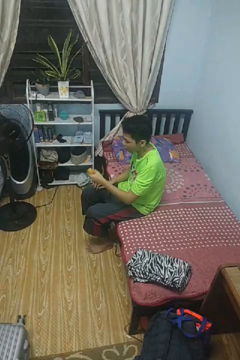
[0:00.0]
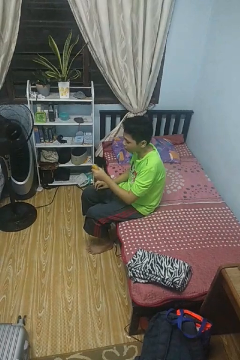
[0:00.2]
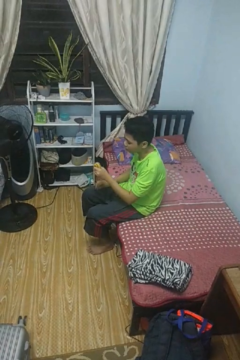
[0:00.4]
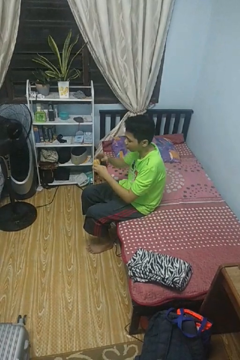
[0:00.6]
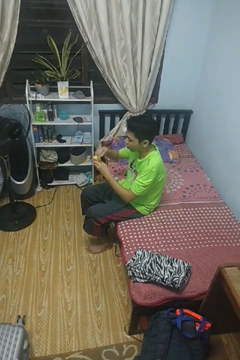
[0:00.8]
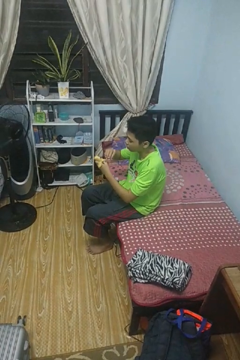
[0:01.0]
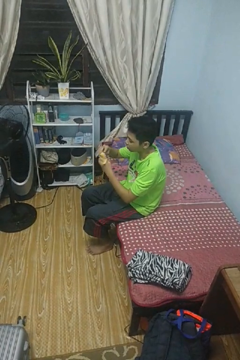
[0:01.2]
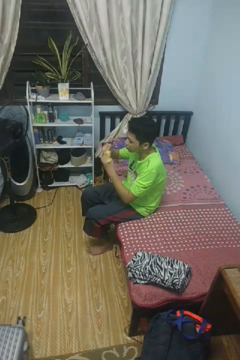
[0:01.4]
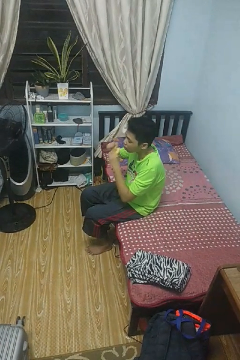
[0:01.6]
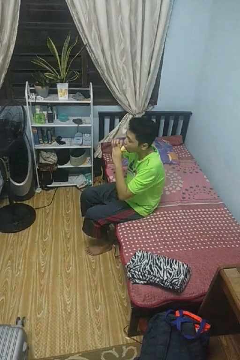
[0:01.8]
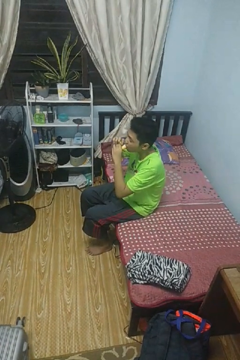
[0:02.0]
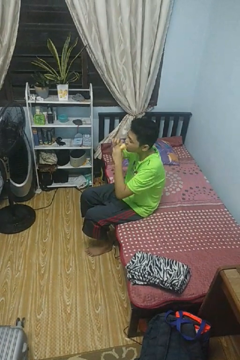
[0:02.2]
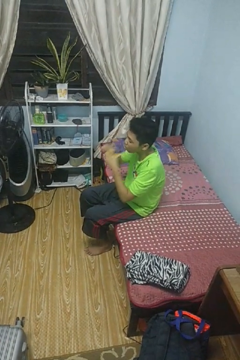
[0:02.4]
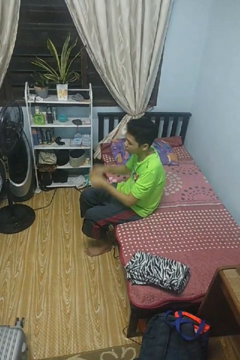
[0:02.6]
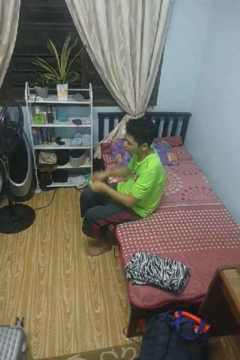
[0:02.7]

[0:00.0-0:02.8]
person eats banana

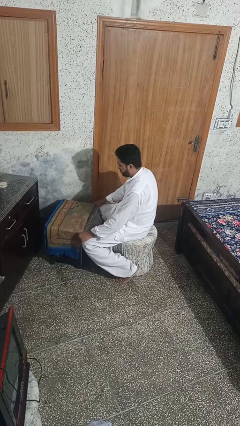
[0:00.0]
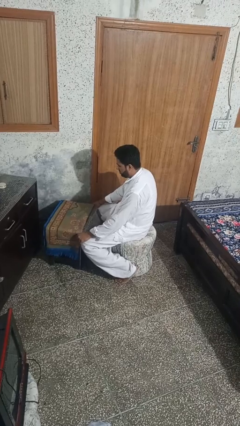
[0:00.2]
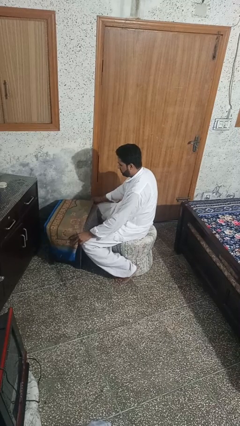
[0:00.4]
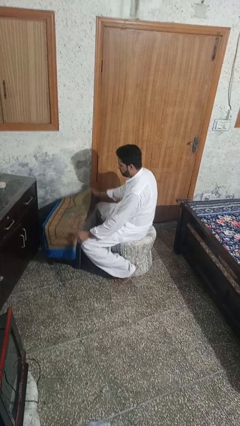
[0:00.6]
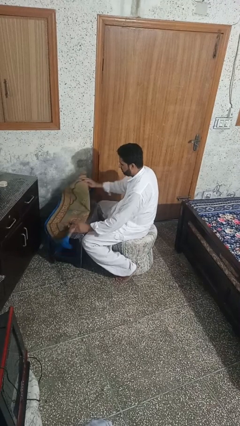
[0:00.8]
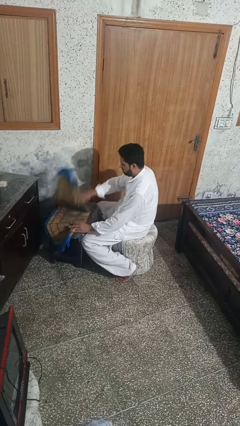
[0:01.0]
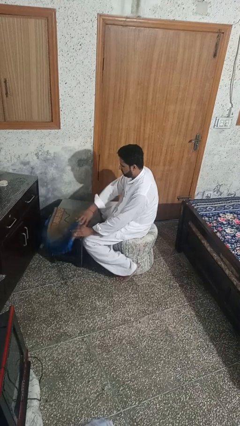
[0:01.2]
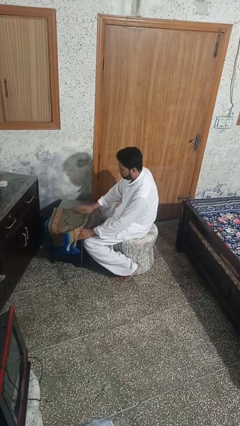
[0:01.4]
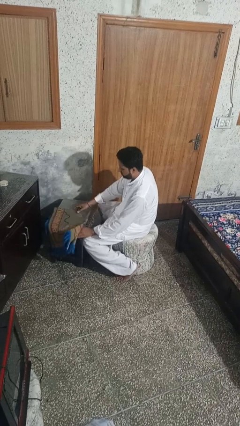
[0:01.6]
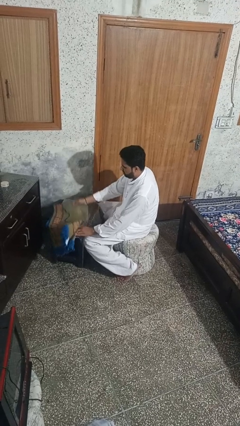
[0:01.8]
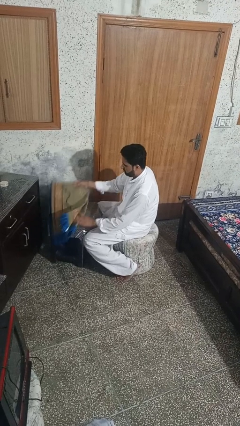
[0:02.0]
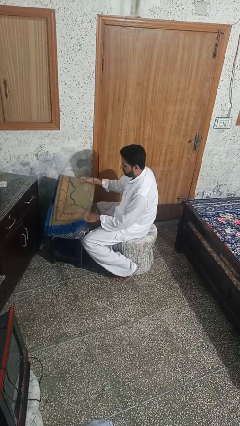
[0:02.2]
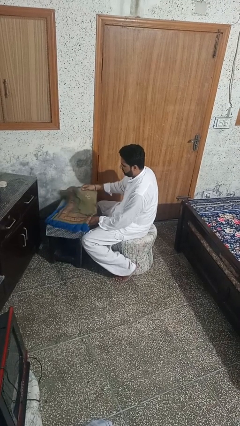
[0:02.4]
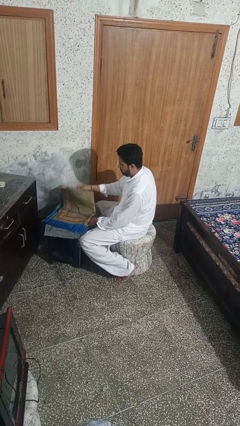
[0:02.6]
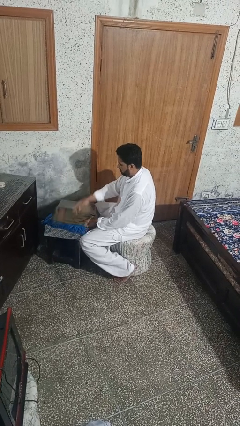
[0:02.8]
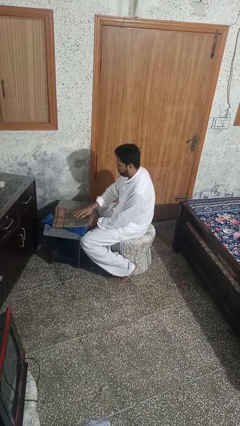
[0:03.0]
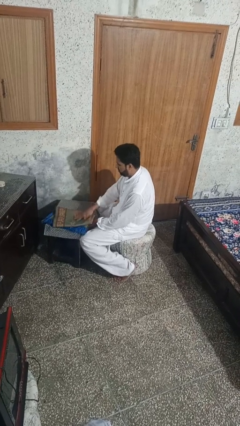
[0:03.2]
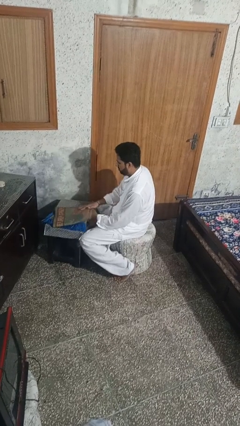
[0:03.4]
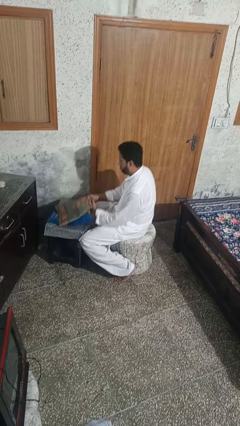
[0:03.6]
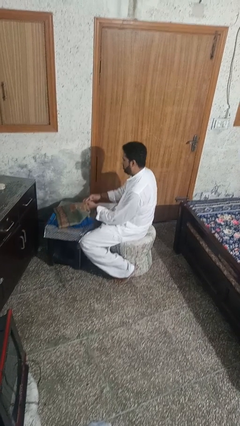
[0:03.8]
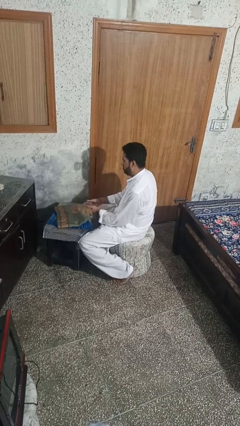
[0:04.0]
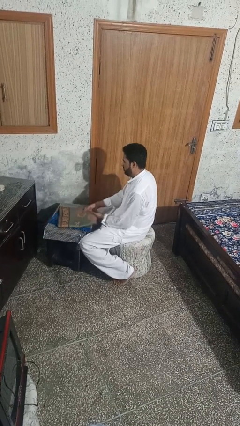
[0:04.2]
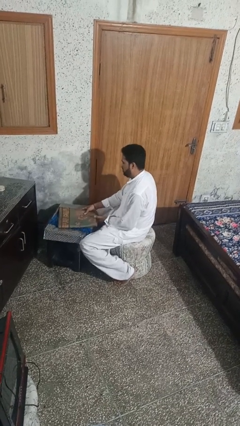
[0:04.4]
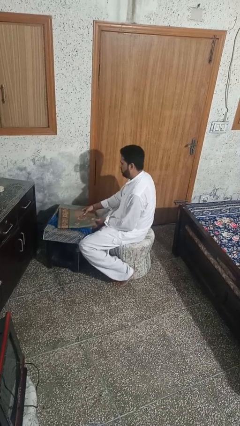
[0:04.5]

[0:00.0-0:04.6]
person folds tablecloth

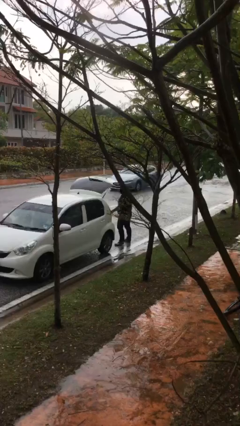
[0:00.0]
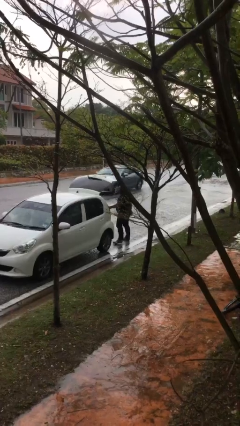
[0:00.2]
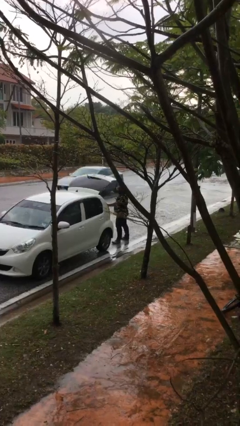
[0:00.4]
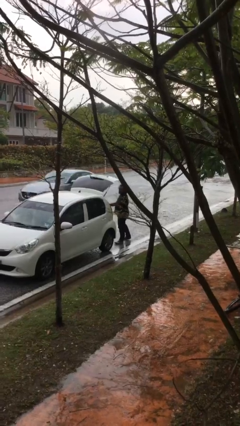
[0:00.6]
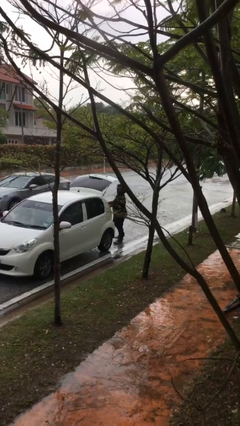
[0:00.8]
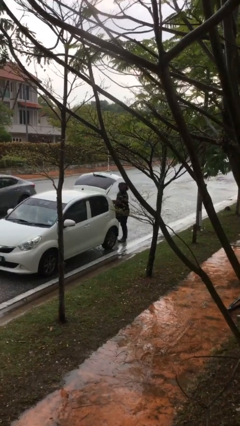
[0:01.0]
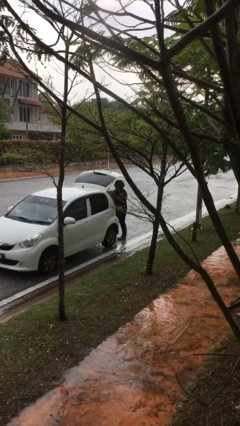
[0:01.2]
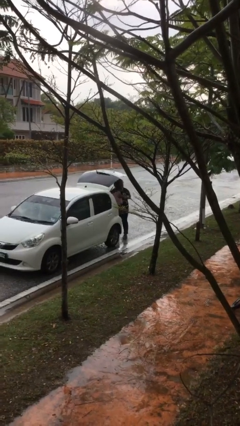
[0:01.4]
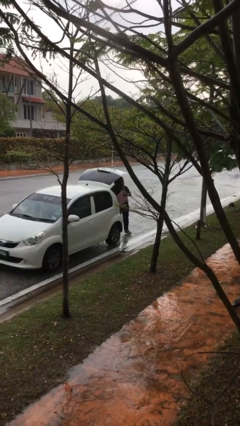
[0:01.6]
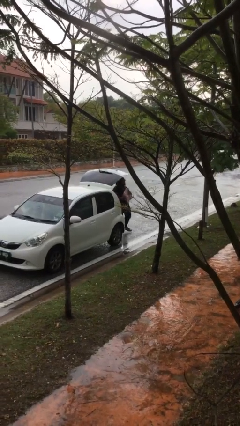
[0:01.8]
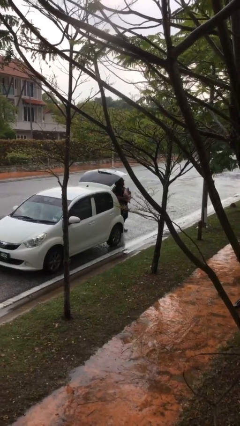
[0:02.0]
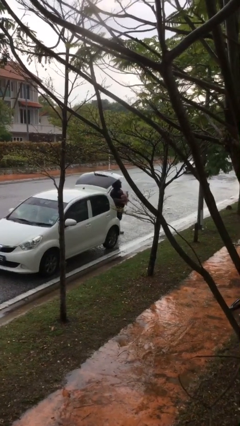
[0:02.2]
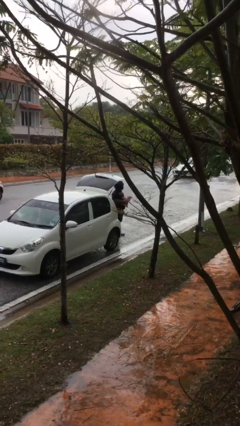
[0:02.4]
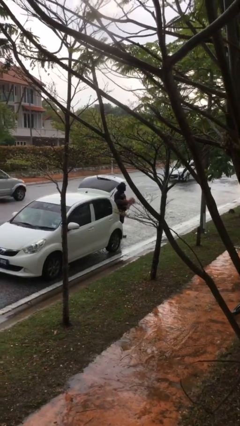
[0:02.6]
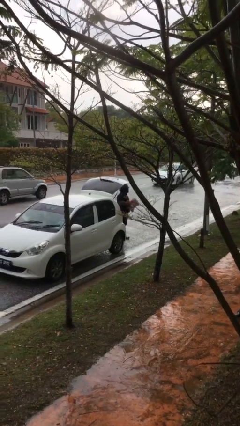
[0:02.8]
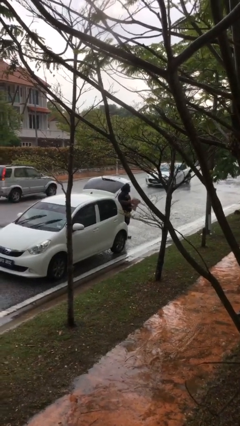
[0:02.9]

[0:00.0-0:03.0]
person unloads car

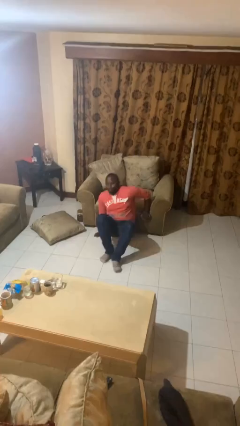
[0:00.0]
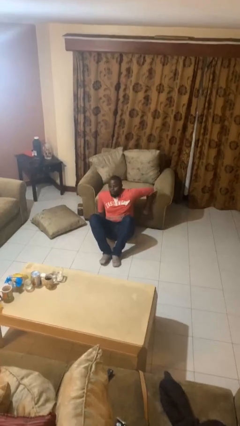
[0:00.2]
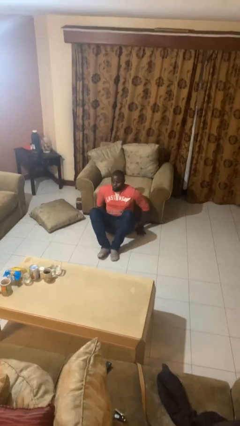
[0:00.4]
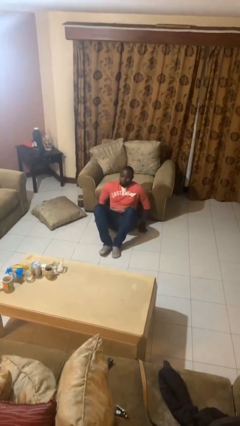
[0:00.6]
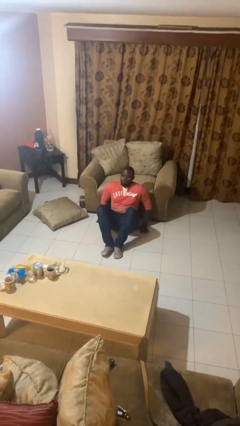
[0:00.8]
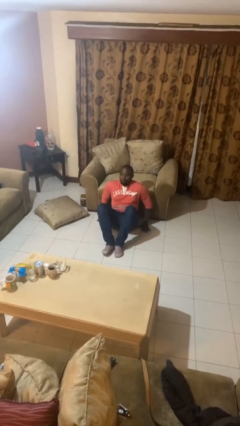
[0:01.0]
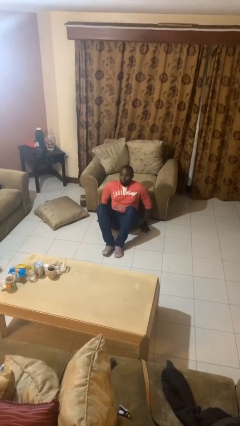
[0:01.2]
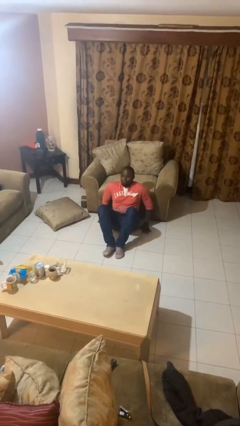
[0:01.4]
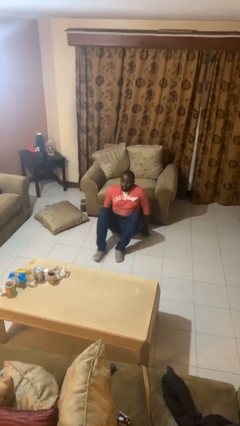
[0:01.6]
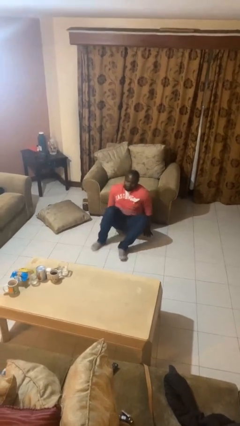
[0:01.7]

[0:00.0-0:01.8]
person falls from chair

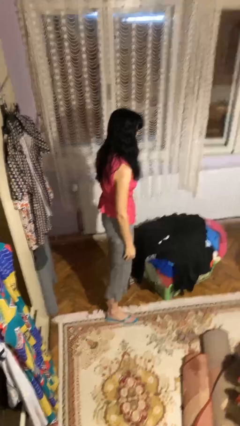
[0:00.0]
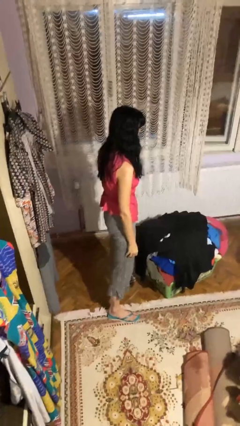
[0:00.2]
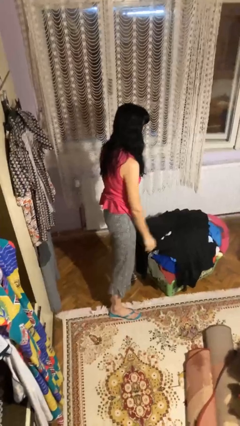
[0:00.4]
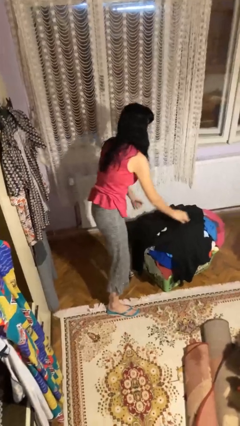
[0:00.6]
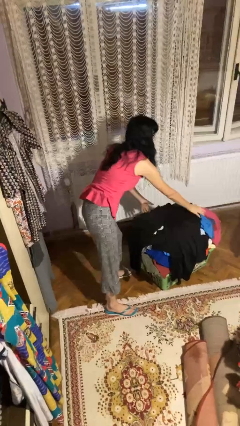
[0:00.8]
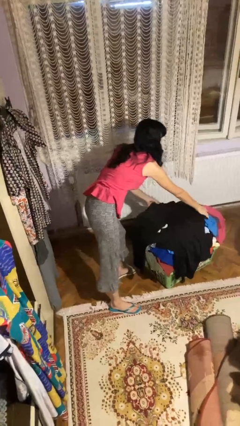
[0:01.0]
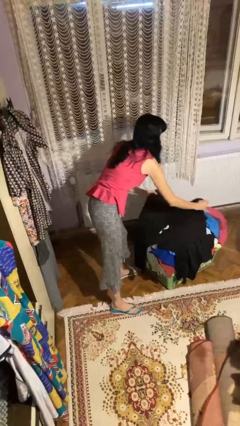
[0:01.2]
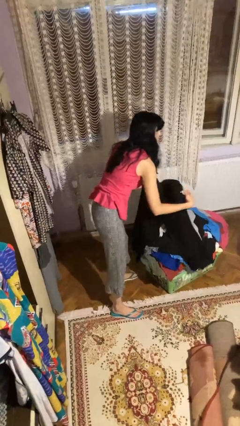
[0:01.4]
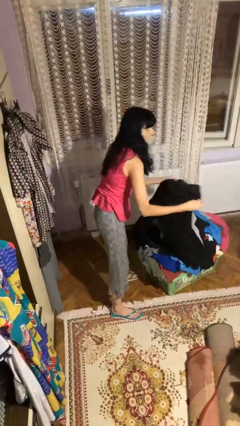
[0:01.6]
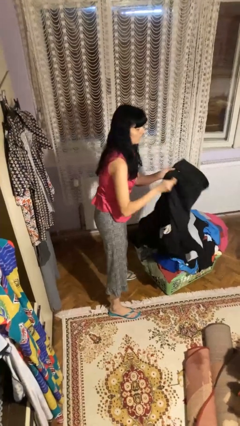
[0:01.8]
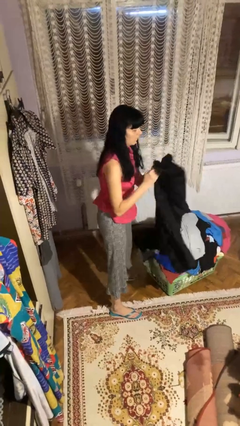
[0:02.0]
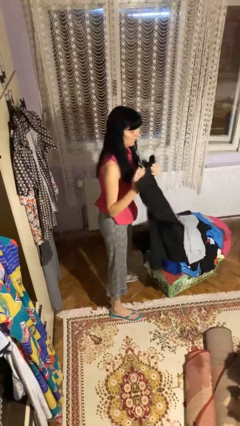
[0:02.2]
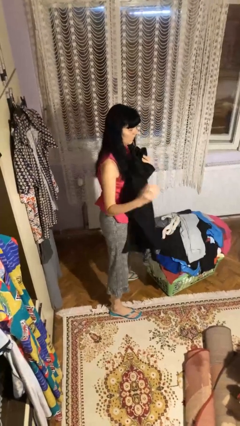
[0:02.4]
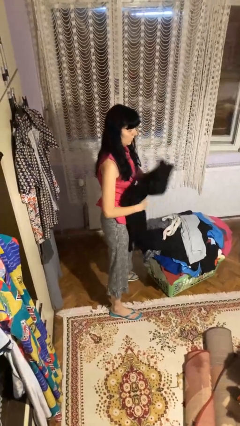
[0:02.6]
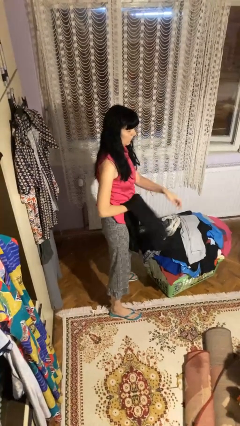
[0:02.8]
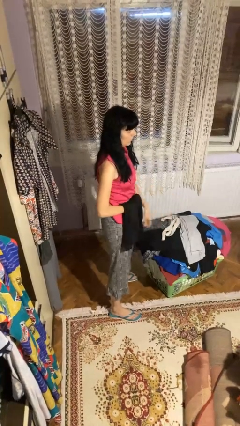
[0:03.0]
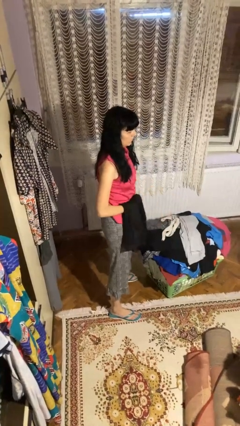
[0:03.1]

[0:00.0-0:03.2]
person folds pants

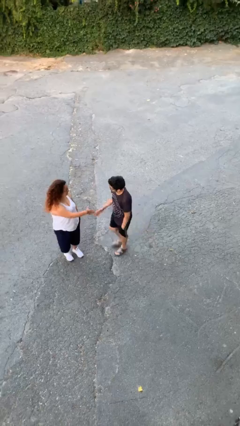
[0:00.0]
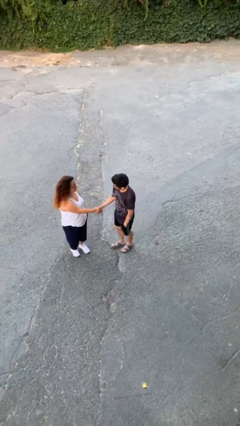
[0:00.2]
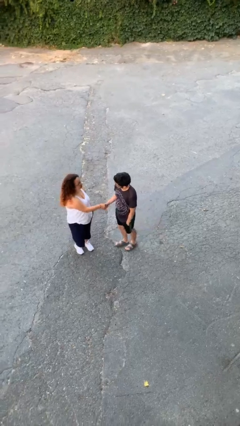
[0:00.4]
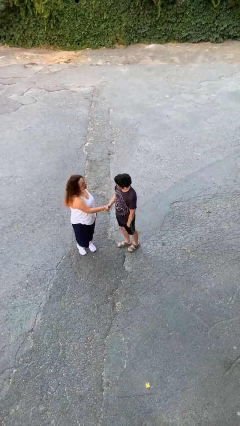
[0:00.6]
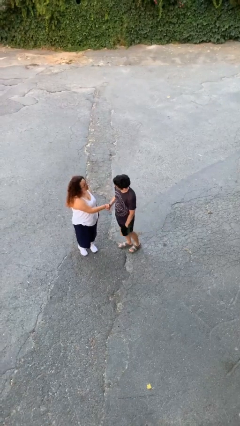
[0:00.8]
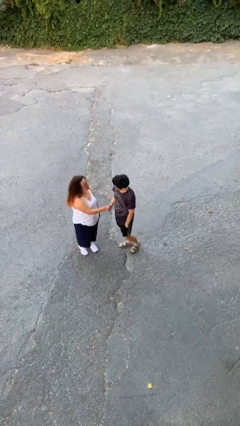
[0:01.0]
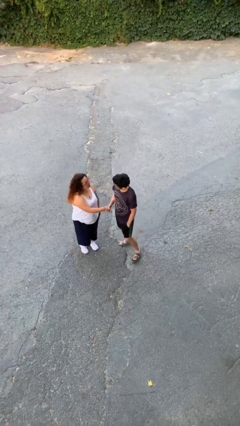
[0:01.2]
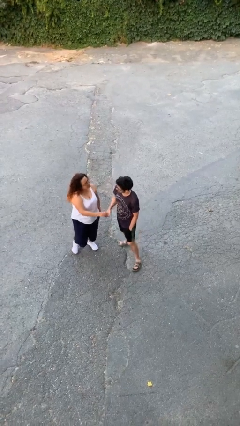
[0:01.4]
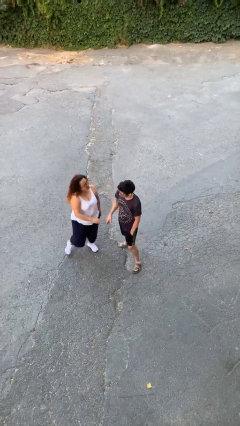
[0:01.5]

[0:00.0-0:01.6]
person shakes hand

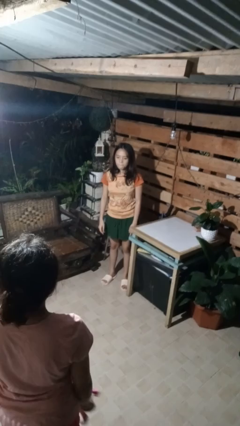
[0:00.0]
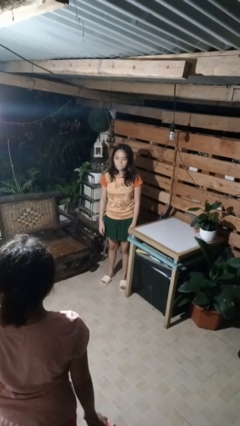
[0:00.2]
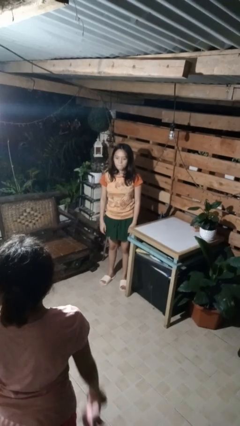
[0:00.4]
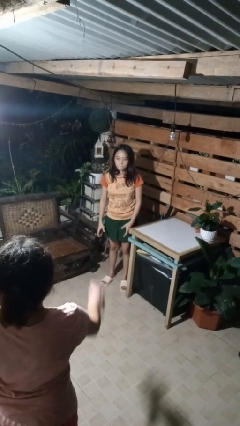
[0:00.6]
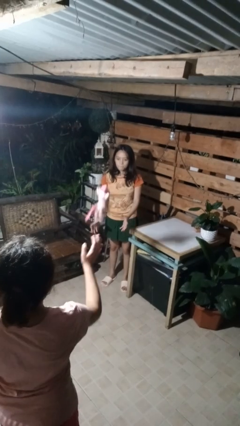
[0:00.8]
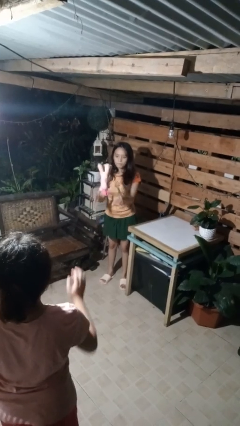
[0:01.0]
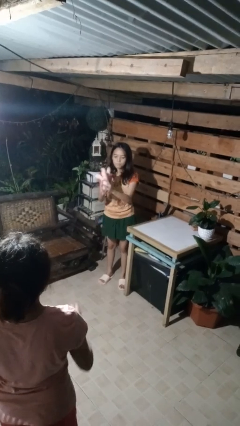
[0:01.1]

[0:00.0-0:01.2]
person catches object from person
